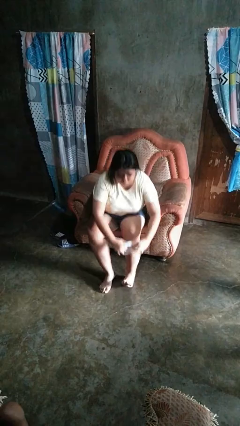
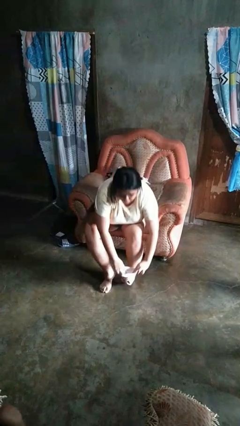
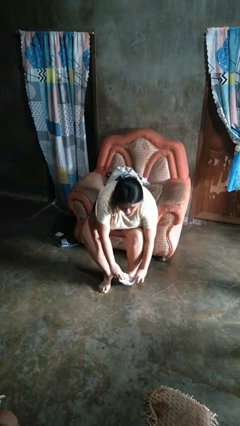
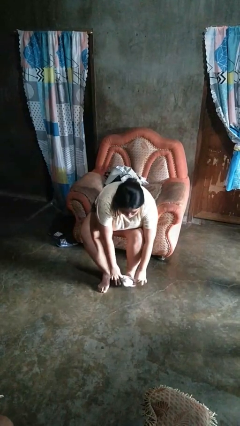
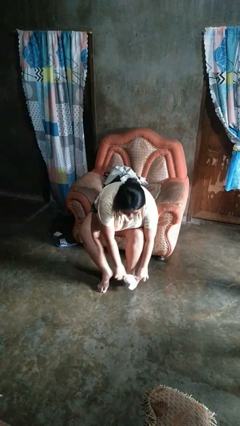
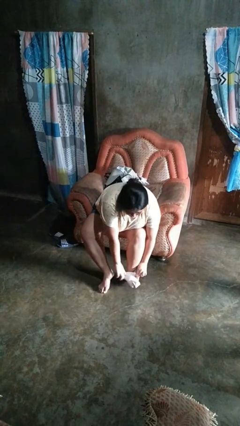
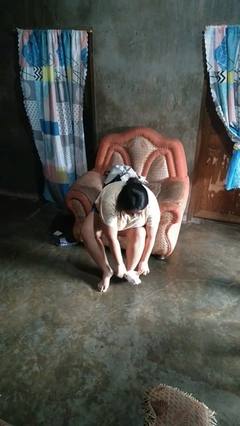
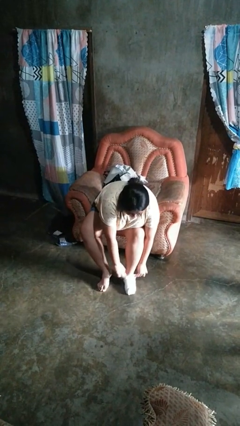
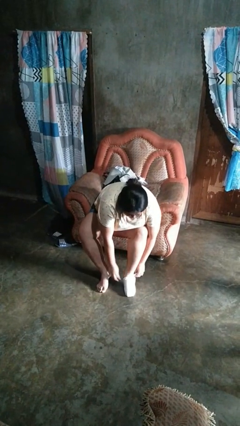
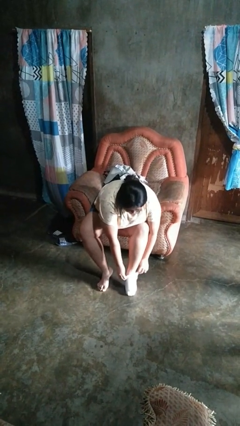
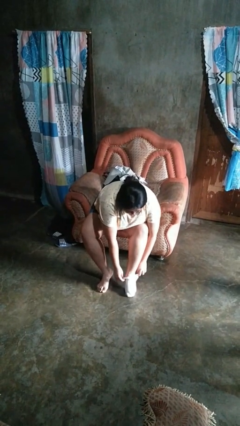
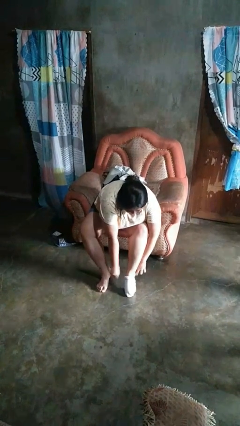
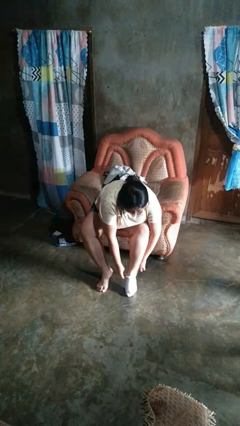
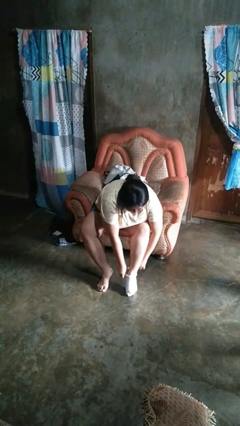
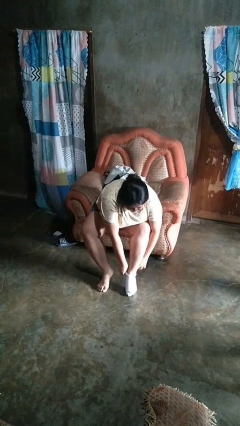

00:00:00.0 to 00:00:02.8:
person puts on socks

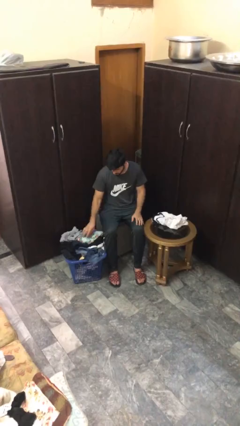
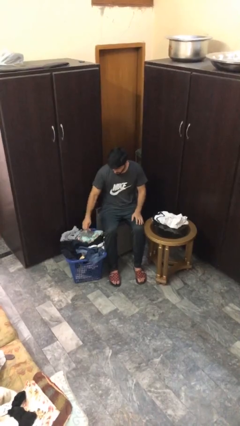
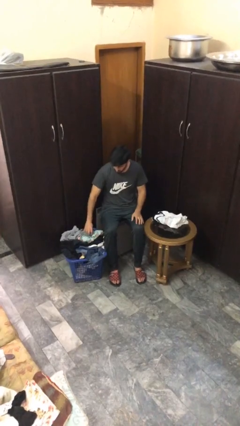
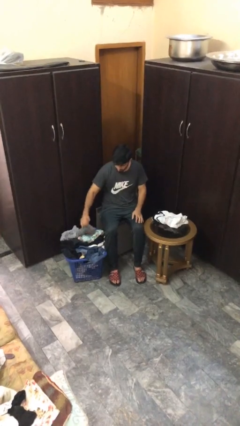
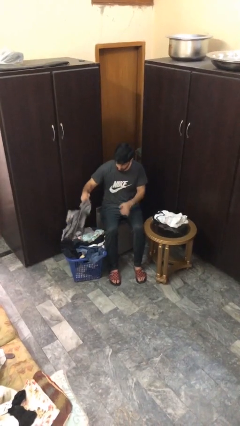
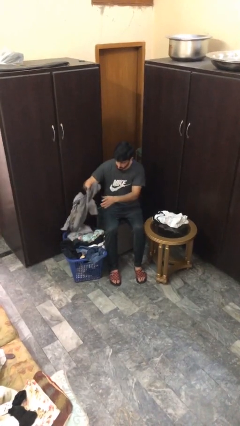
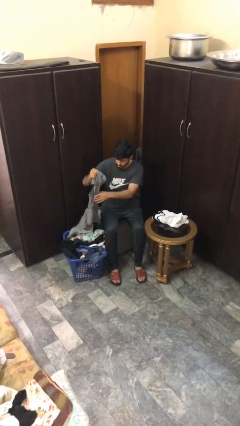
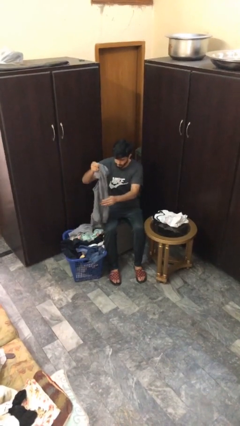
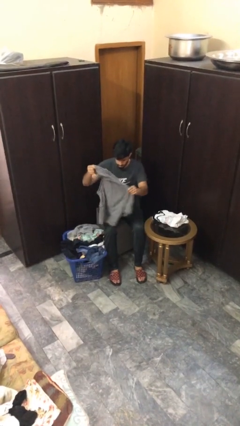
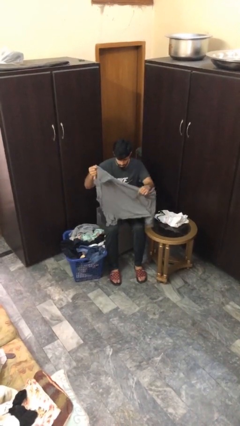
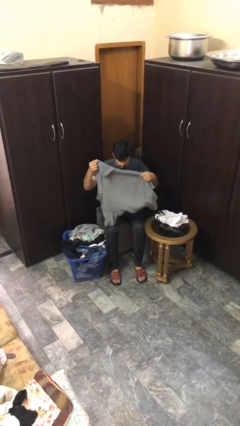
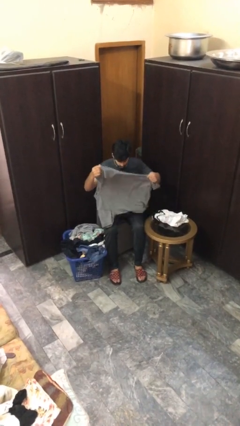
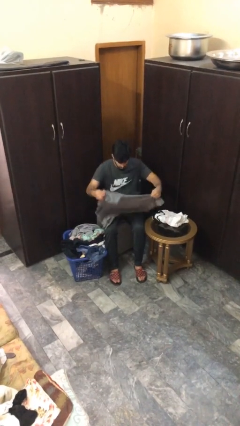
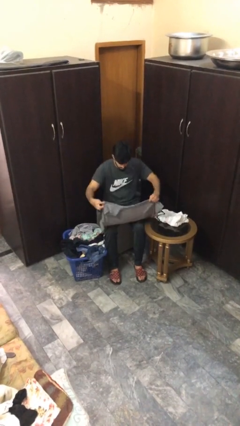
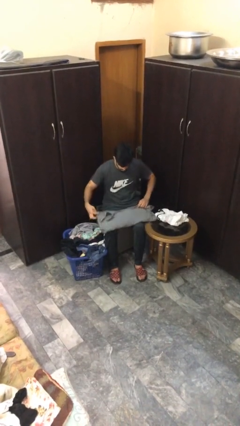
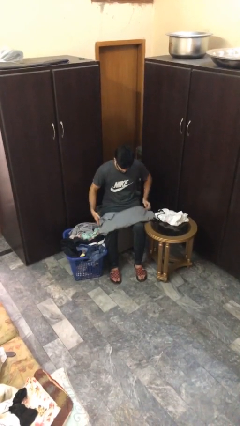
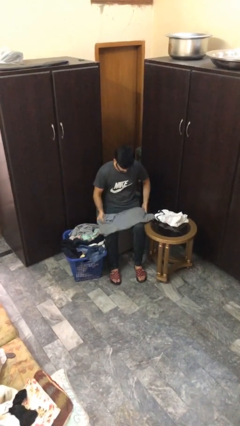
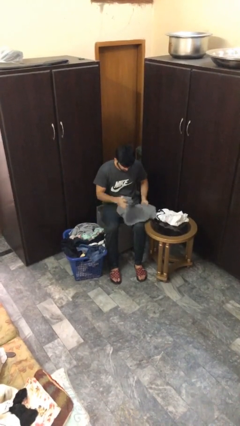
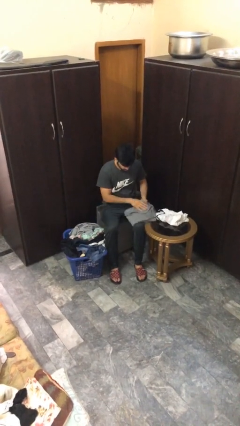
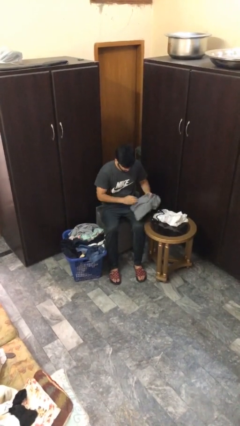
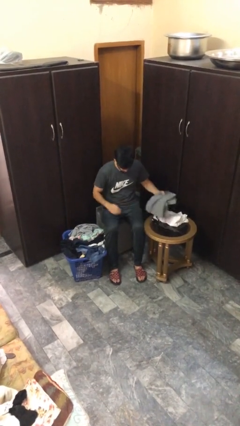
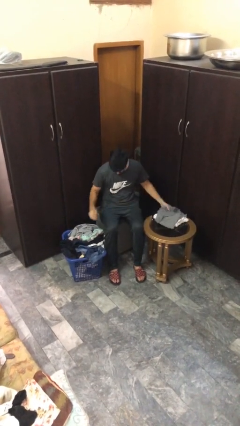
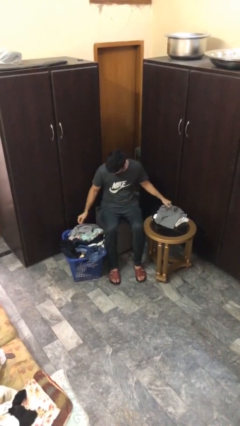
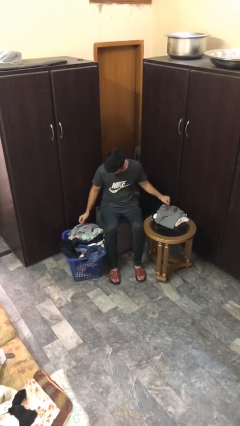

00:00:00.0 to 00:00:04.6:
person folds shirt

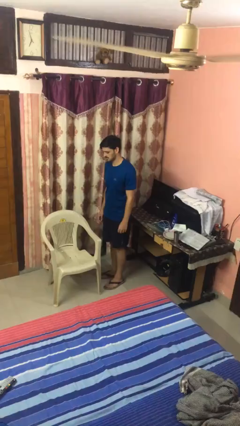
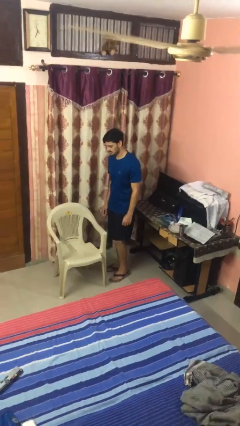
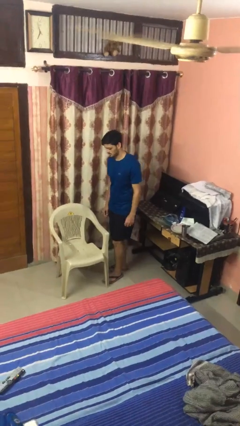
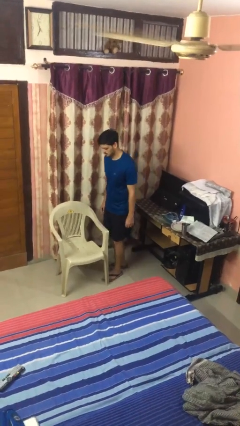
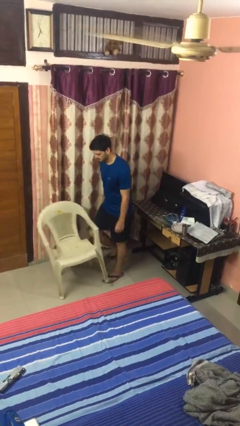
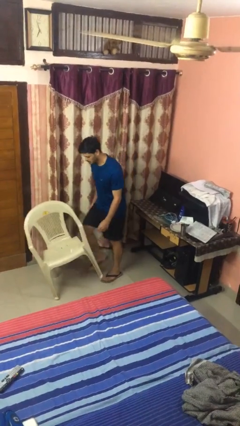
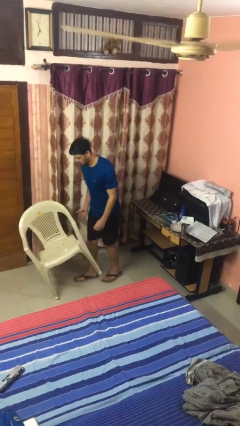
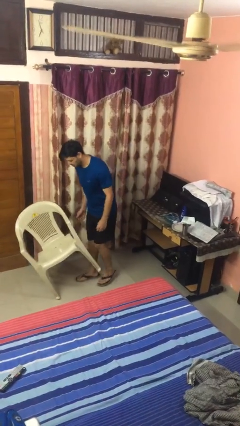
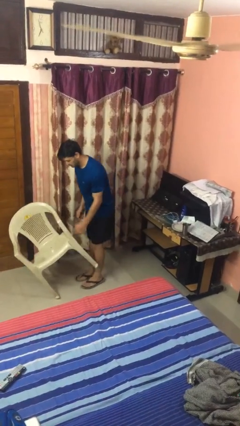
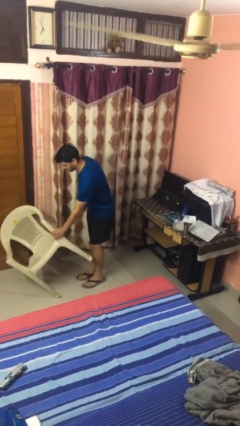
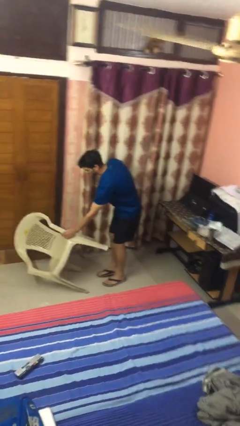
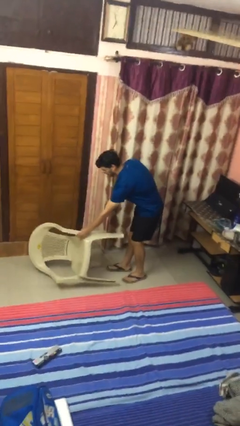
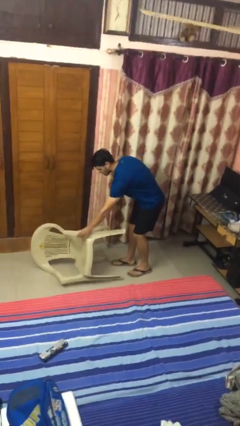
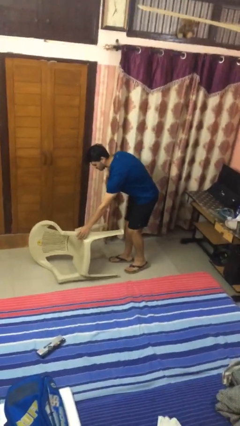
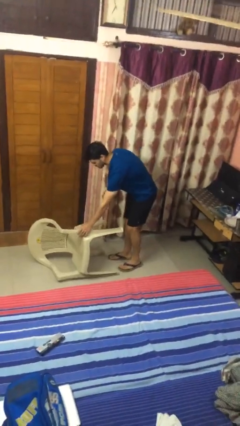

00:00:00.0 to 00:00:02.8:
person knocks over furniture

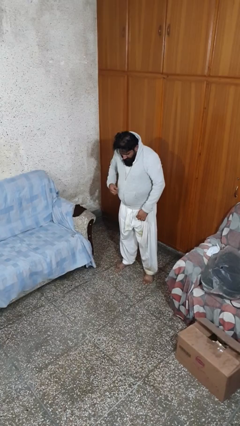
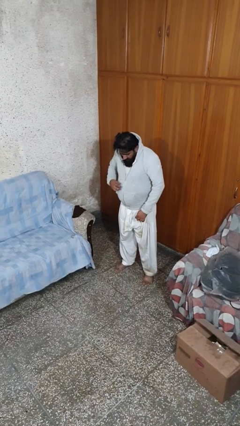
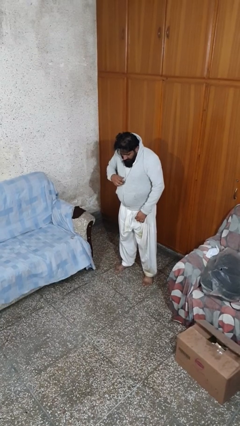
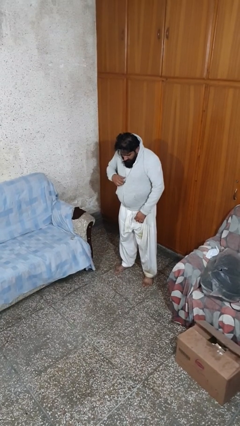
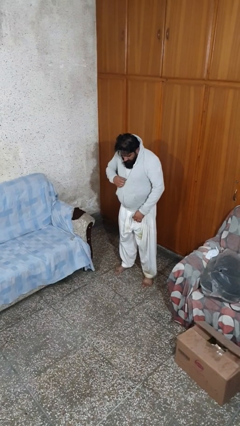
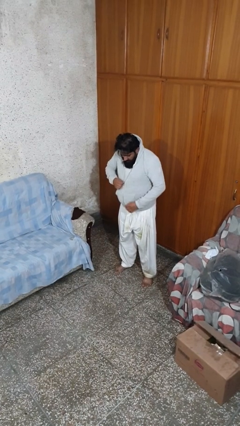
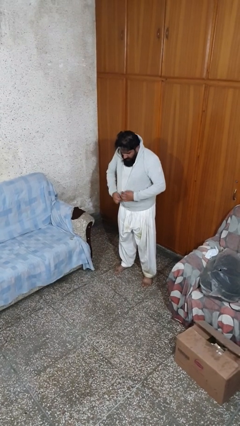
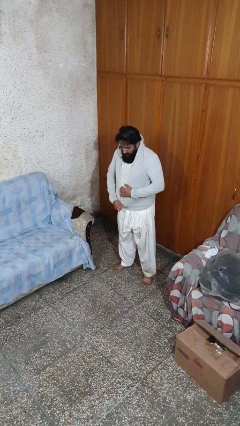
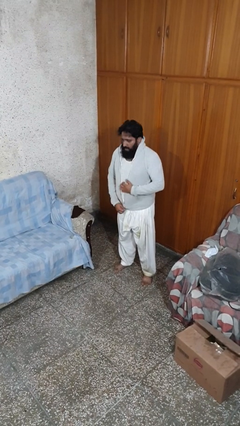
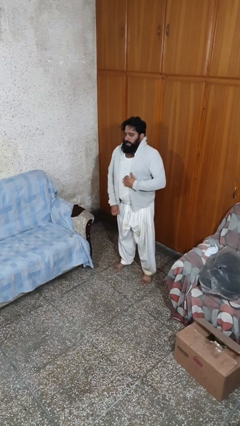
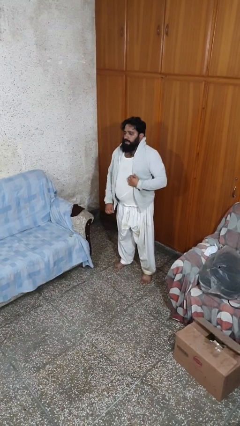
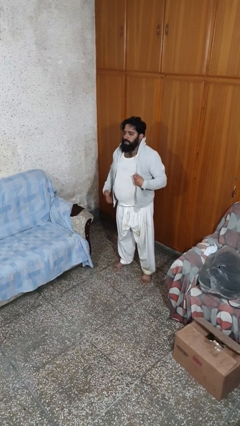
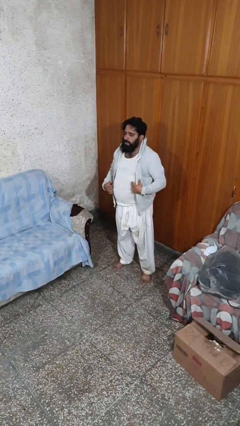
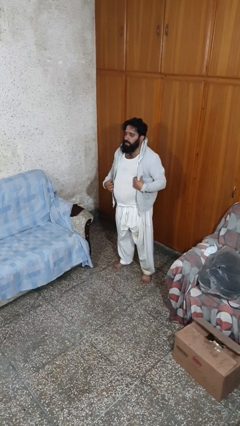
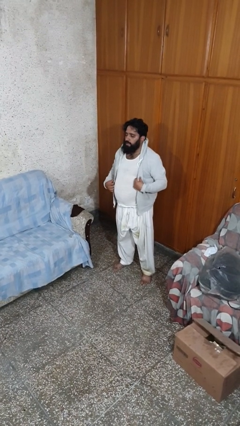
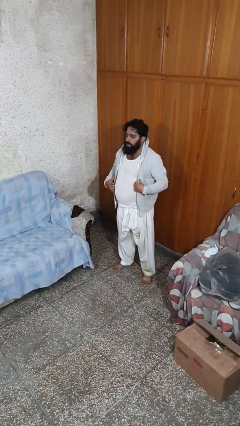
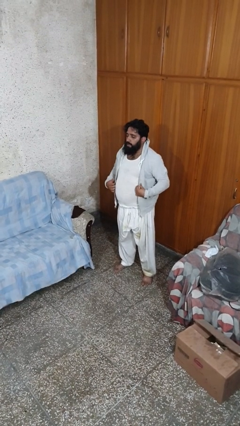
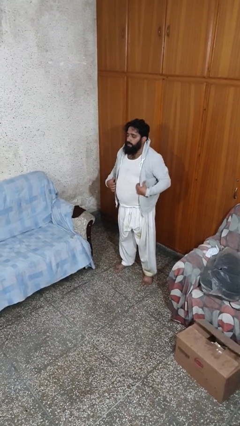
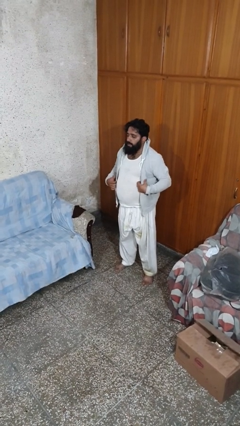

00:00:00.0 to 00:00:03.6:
person unzips jacket

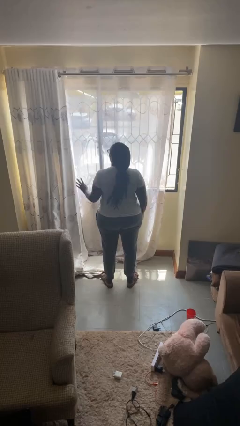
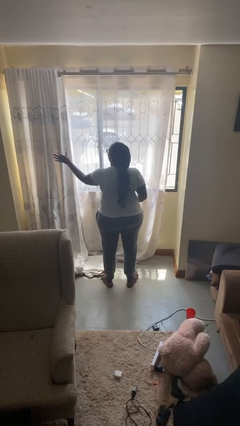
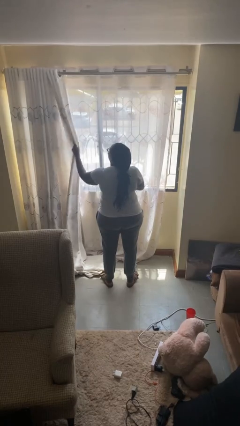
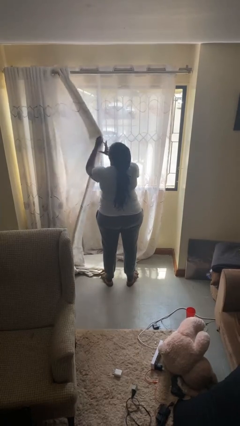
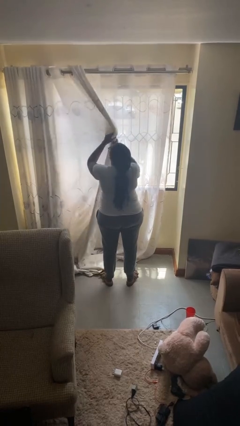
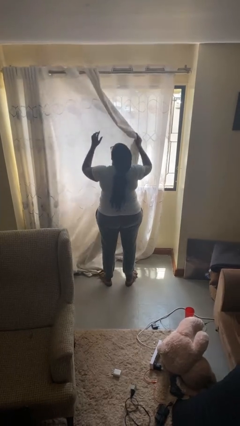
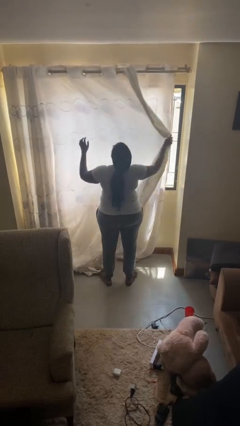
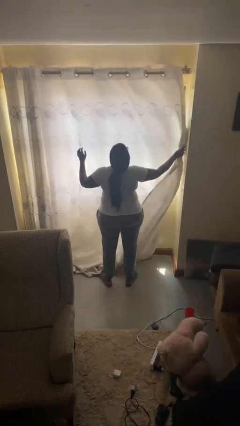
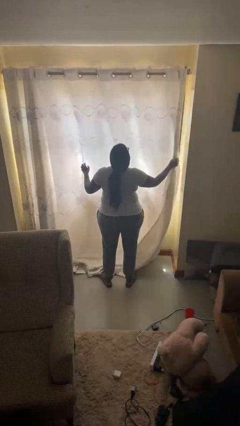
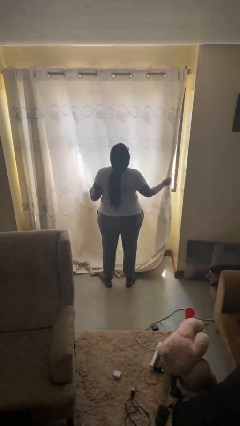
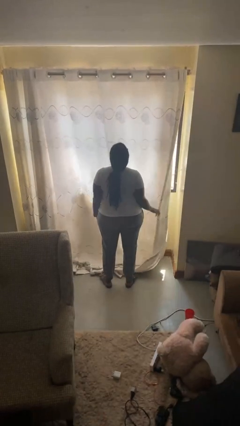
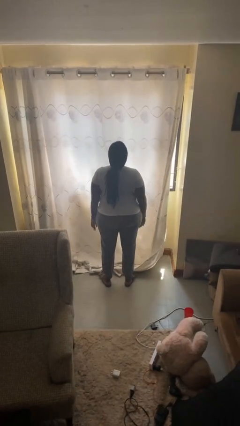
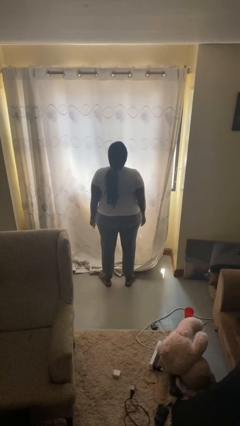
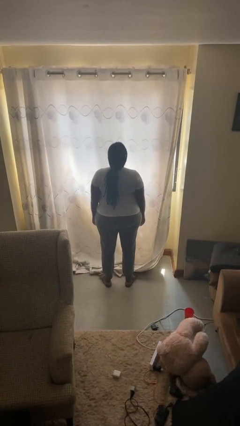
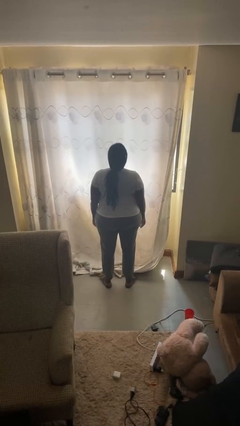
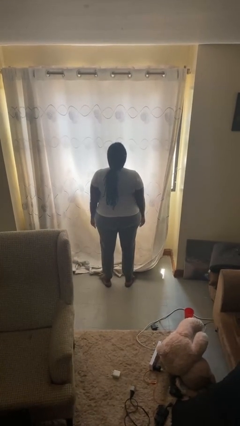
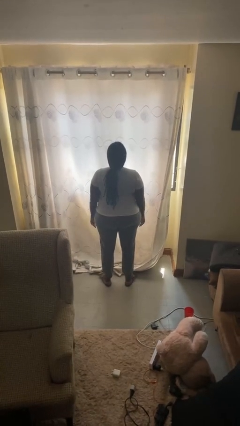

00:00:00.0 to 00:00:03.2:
person closes curtains

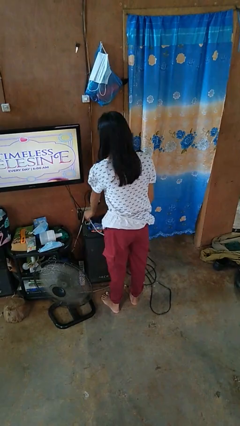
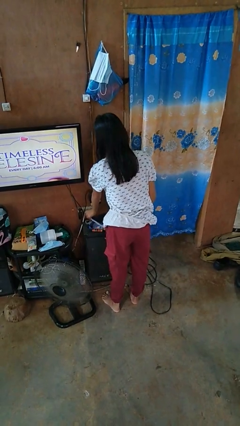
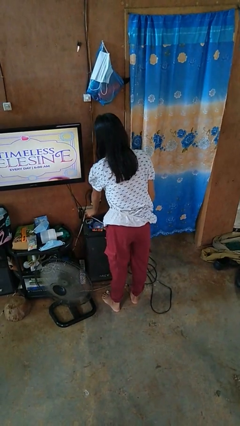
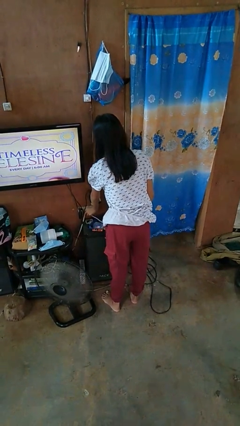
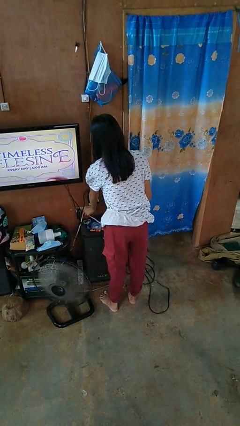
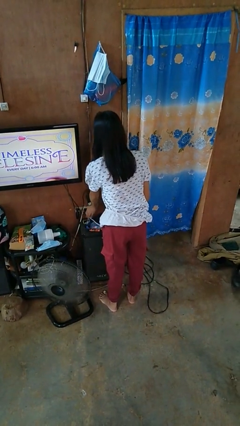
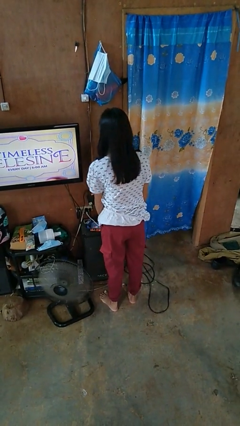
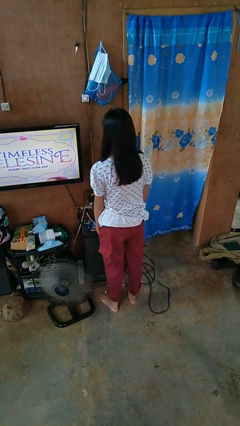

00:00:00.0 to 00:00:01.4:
person plugs into electrical socket
